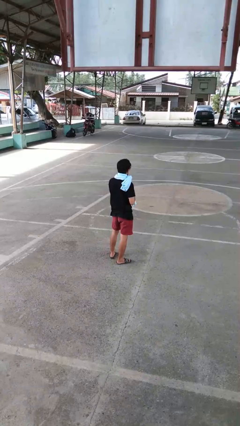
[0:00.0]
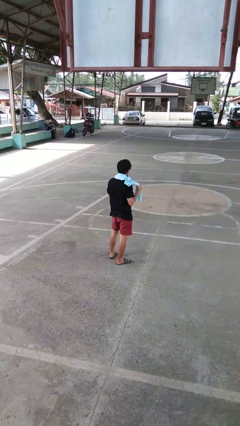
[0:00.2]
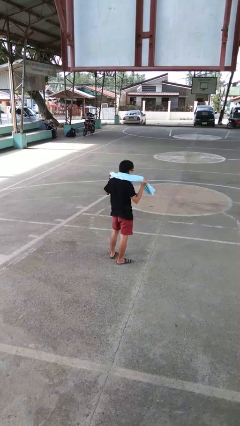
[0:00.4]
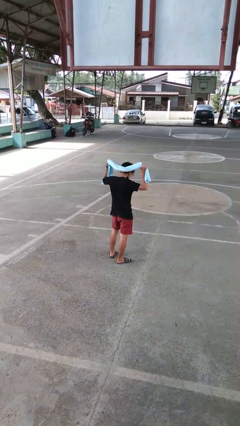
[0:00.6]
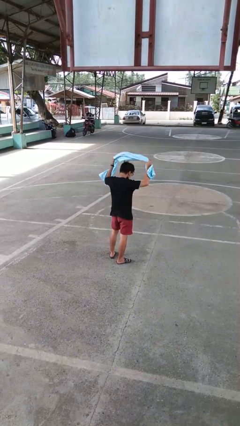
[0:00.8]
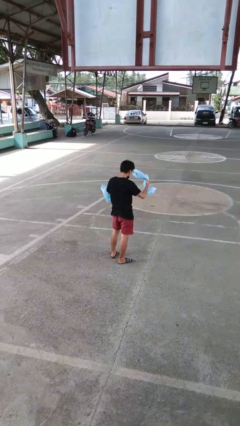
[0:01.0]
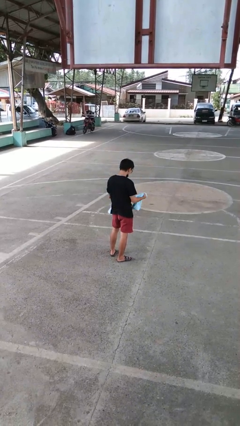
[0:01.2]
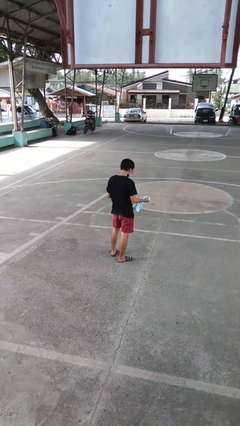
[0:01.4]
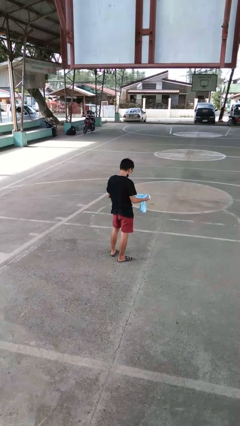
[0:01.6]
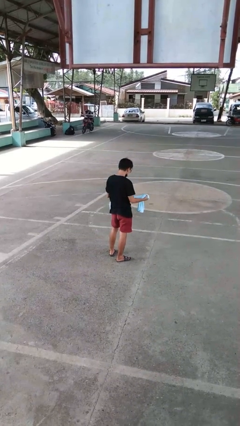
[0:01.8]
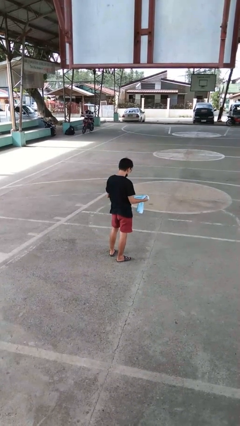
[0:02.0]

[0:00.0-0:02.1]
person takes off scarf

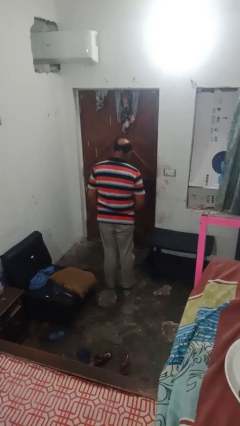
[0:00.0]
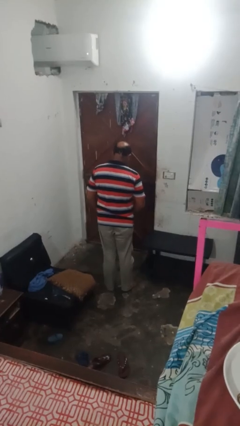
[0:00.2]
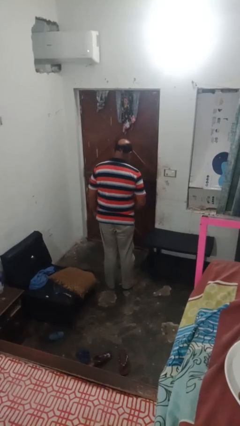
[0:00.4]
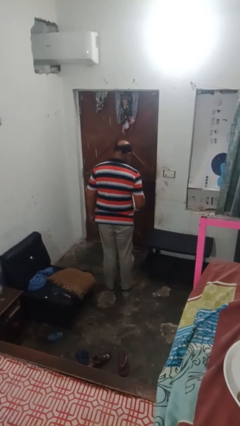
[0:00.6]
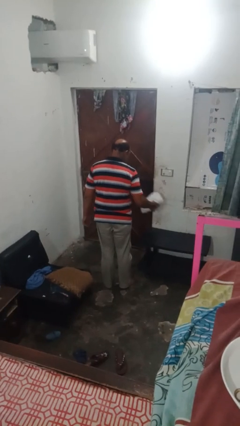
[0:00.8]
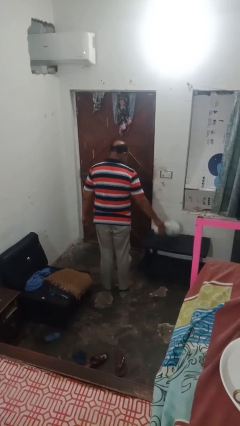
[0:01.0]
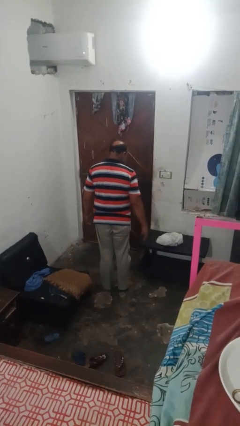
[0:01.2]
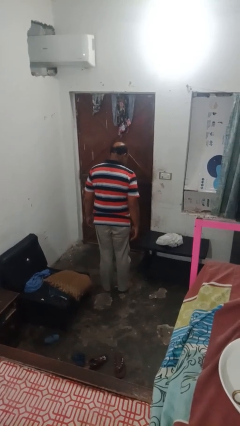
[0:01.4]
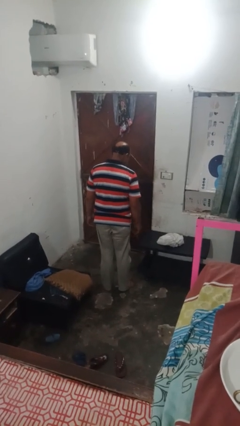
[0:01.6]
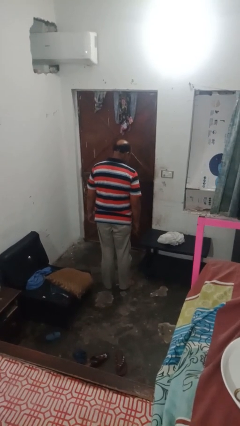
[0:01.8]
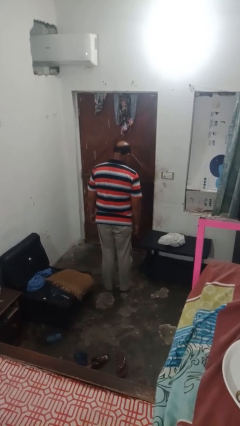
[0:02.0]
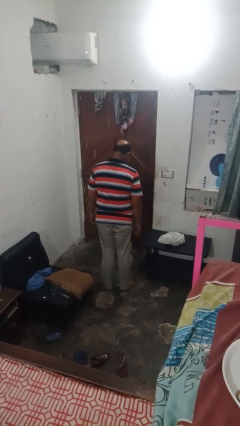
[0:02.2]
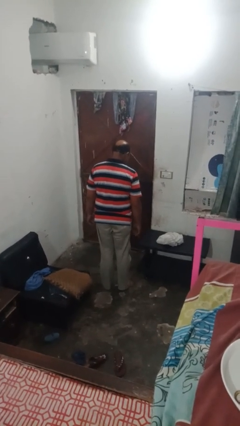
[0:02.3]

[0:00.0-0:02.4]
person throws object on table

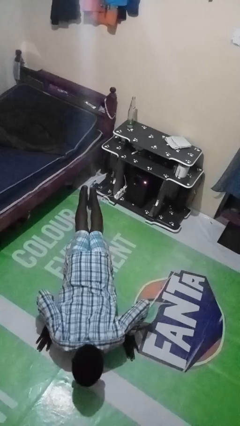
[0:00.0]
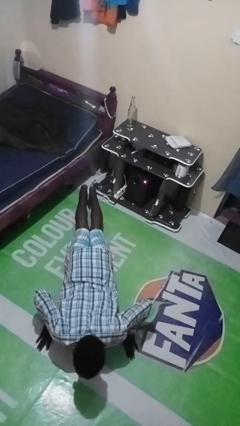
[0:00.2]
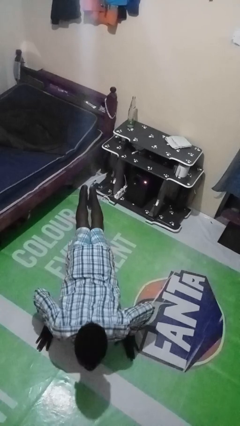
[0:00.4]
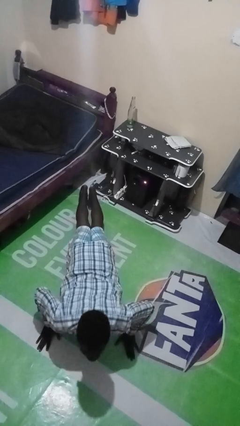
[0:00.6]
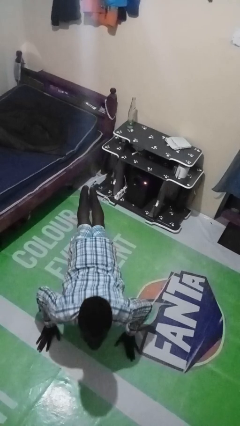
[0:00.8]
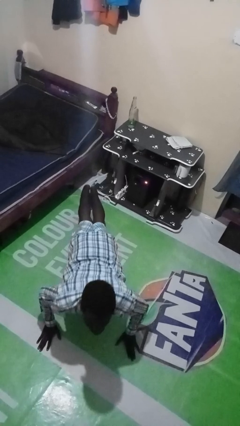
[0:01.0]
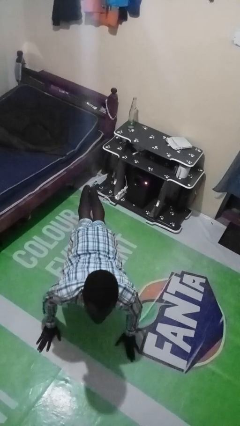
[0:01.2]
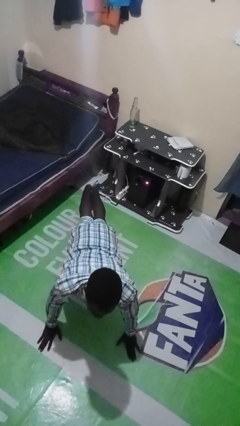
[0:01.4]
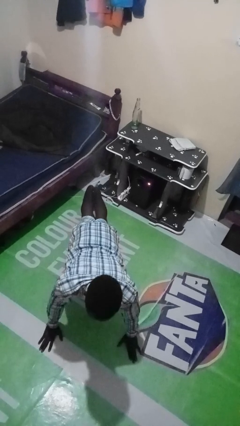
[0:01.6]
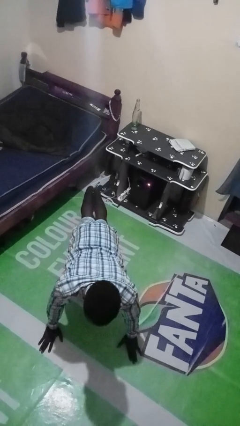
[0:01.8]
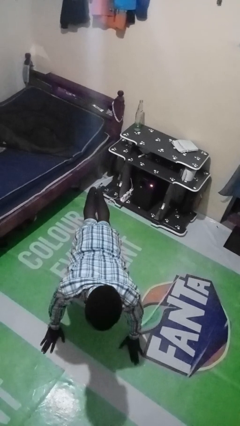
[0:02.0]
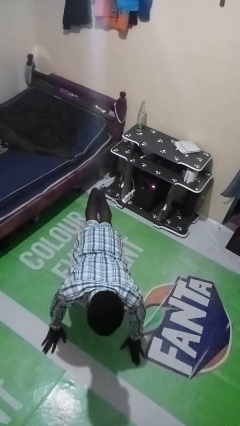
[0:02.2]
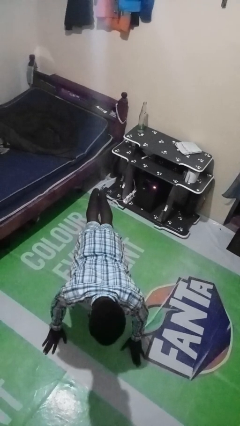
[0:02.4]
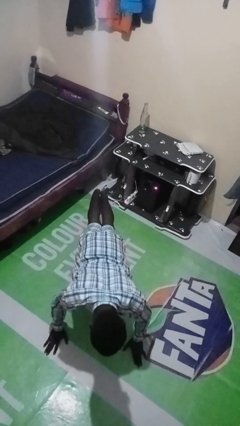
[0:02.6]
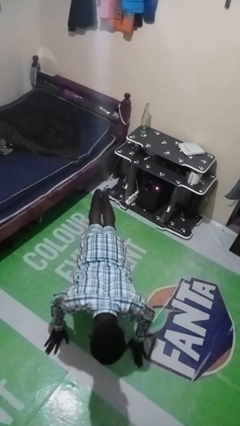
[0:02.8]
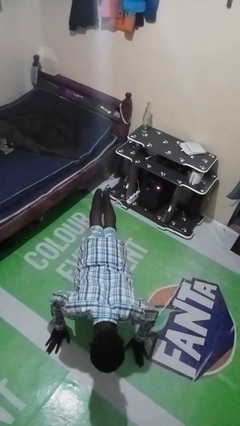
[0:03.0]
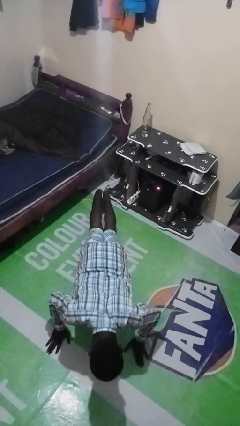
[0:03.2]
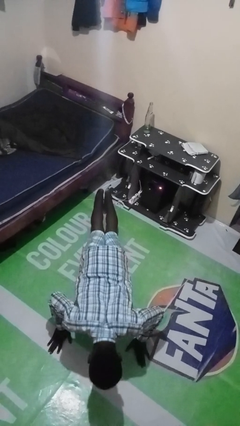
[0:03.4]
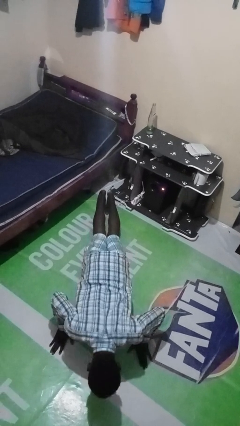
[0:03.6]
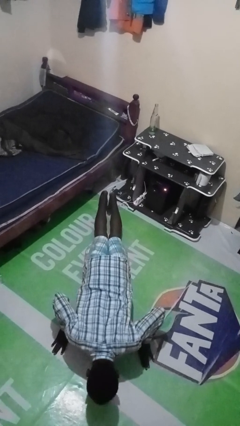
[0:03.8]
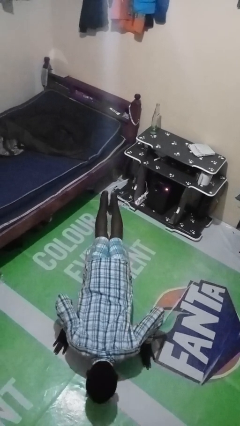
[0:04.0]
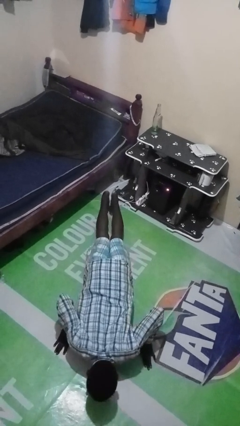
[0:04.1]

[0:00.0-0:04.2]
person exercises with pushup

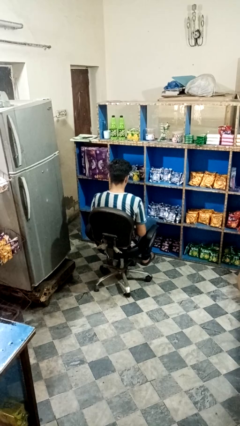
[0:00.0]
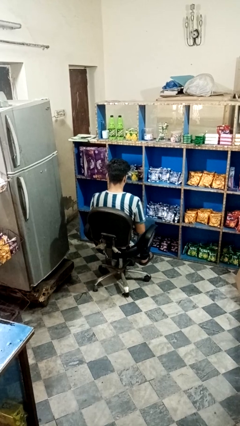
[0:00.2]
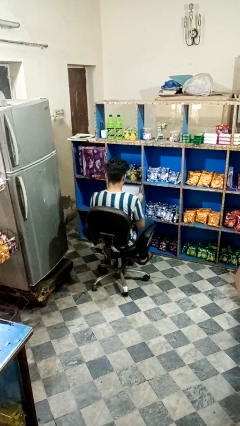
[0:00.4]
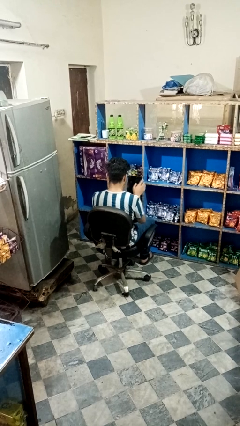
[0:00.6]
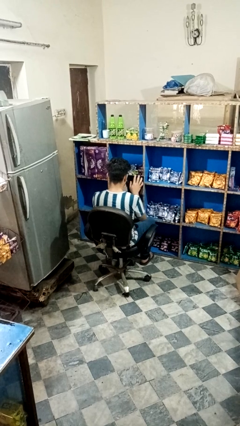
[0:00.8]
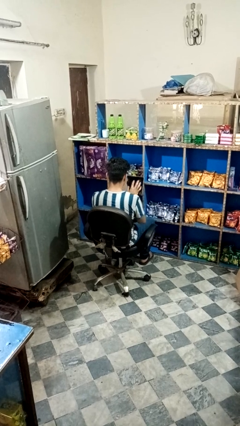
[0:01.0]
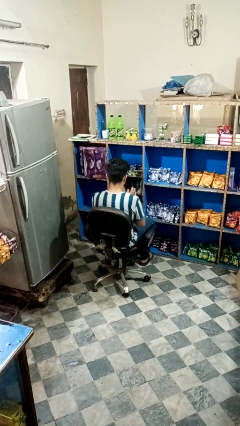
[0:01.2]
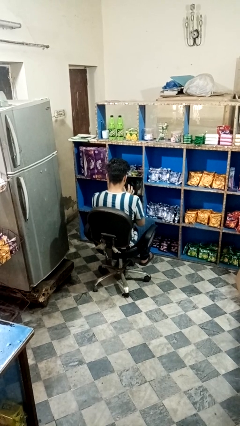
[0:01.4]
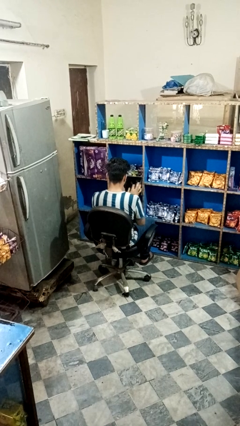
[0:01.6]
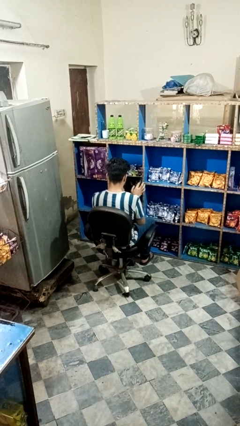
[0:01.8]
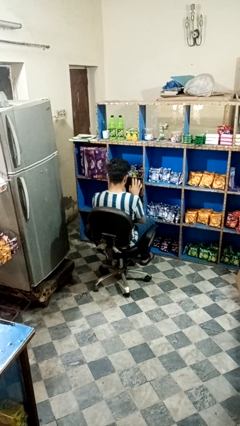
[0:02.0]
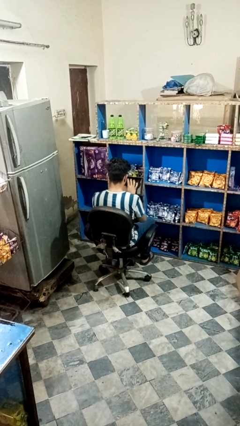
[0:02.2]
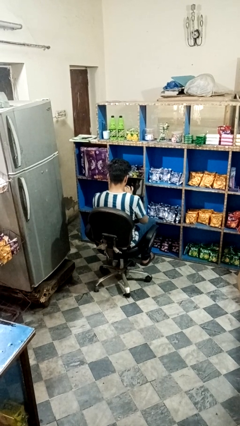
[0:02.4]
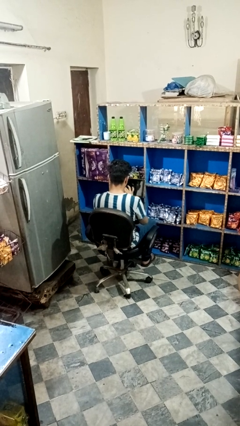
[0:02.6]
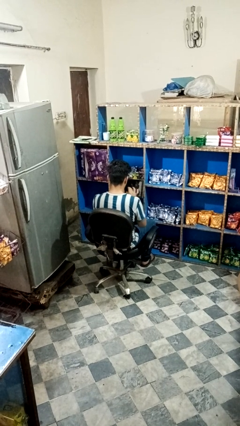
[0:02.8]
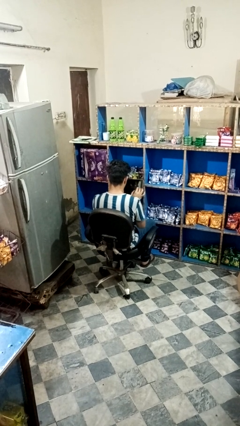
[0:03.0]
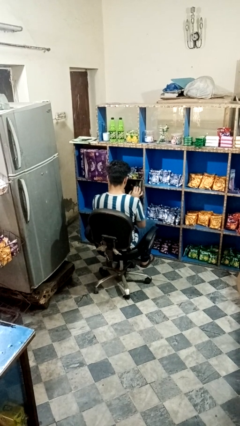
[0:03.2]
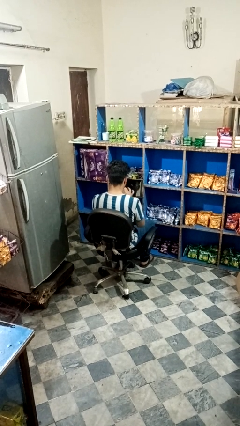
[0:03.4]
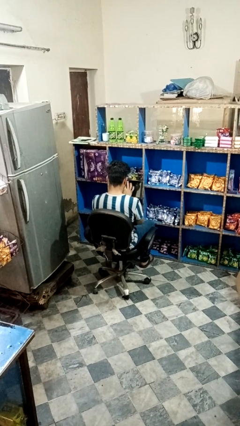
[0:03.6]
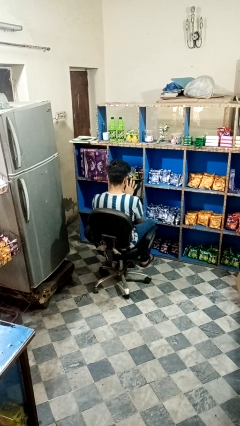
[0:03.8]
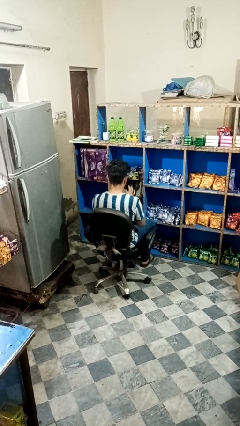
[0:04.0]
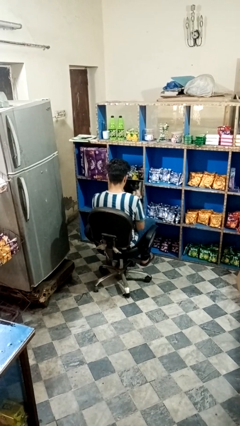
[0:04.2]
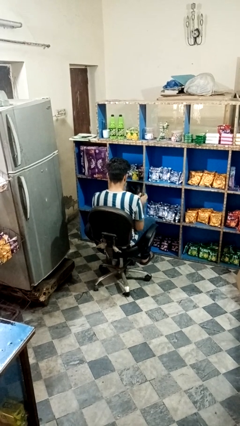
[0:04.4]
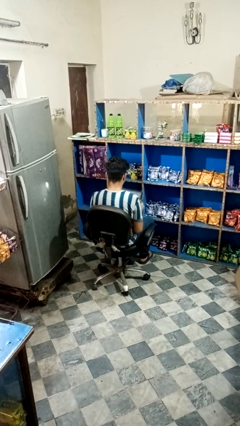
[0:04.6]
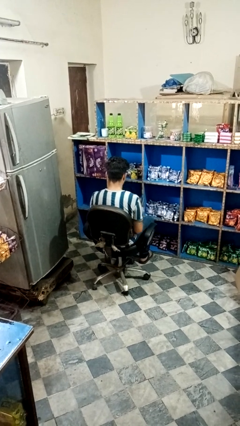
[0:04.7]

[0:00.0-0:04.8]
person interacts with tablet

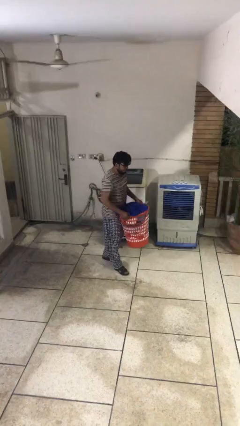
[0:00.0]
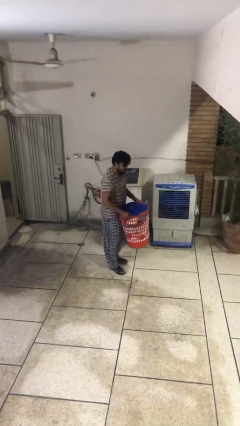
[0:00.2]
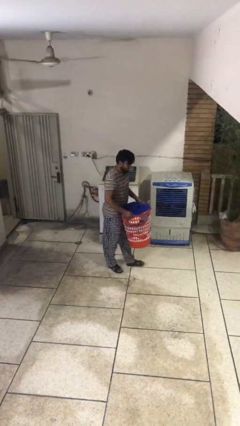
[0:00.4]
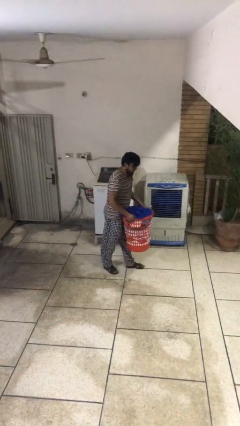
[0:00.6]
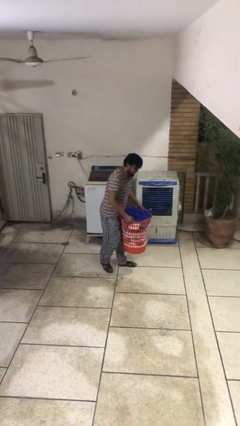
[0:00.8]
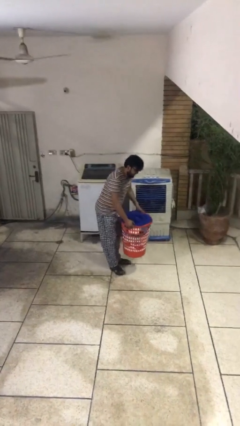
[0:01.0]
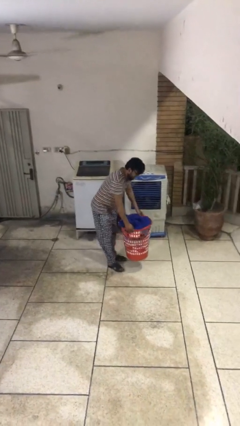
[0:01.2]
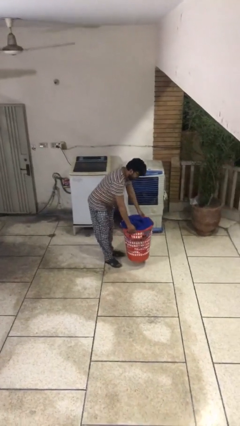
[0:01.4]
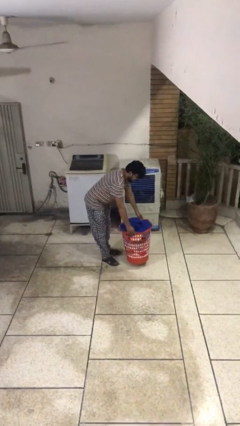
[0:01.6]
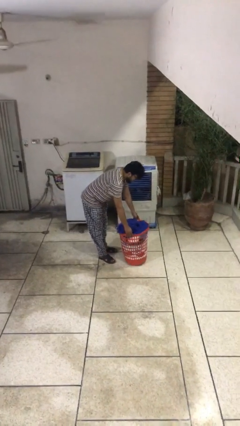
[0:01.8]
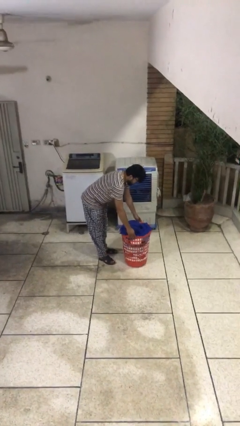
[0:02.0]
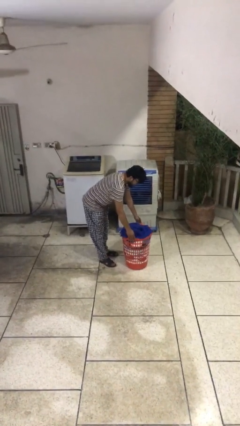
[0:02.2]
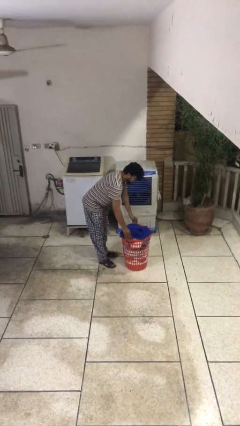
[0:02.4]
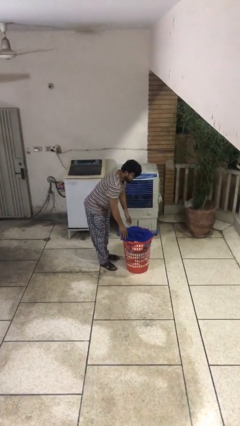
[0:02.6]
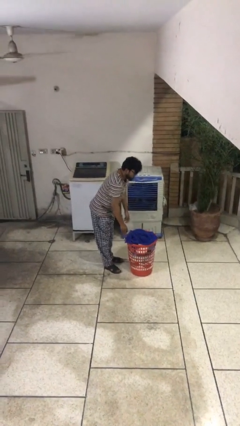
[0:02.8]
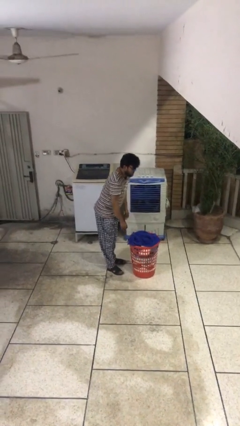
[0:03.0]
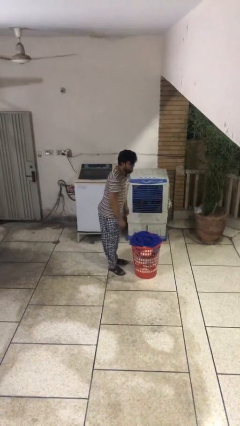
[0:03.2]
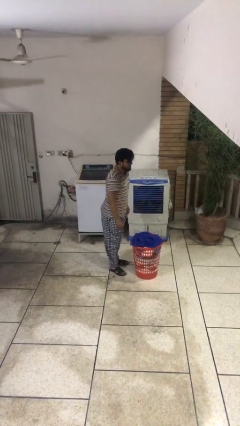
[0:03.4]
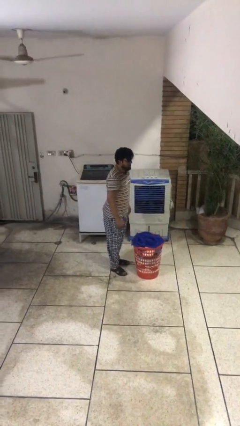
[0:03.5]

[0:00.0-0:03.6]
person puts down object on floor

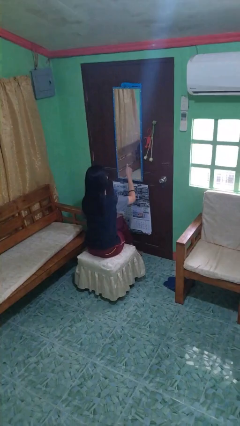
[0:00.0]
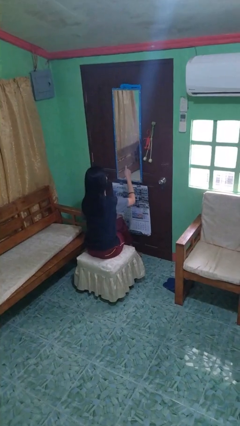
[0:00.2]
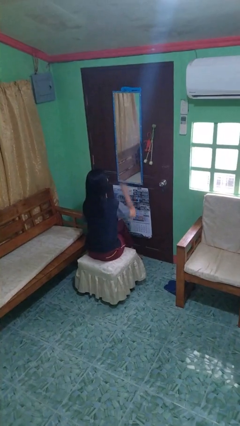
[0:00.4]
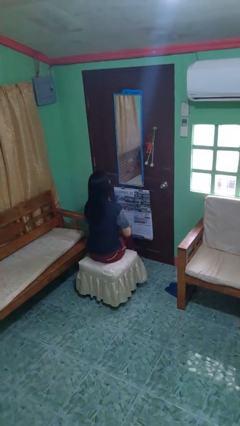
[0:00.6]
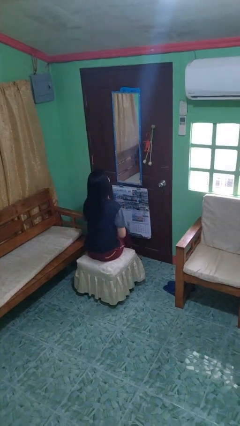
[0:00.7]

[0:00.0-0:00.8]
person gestures thumbs up
